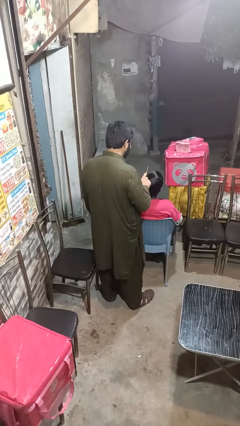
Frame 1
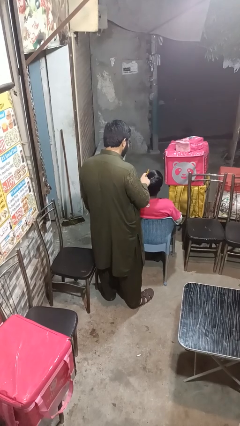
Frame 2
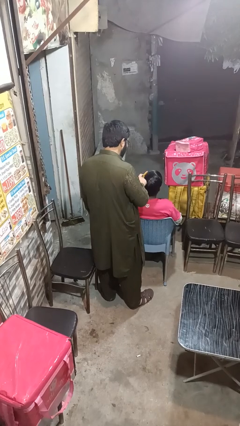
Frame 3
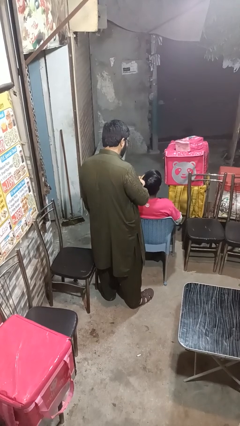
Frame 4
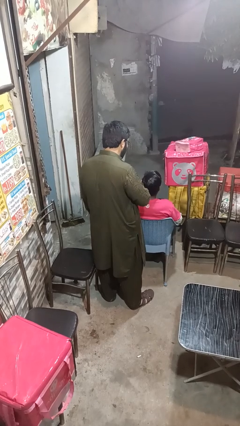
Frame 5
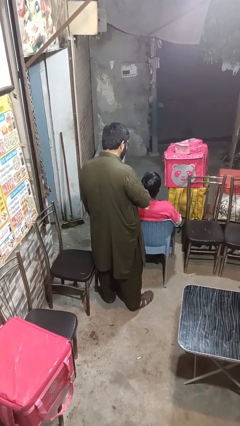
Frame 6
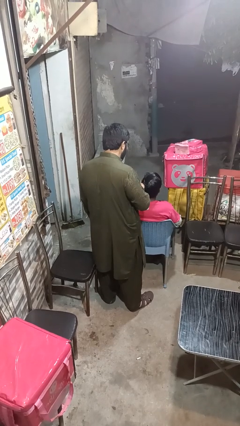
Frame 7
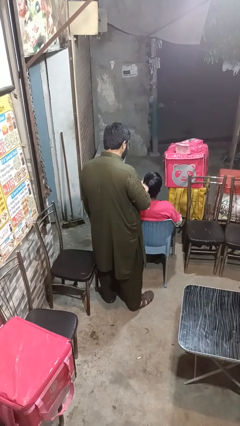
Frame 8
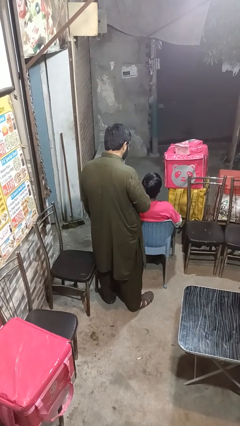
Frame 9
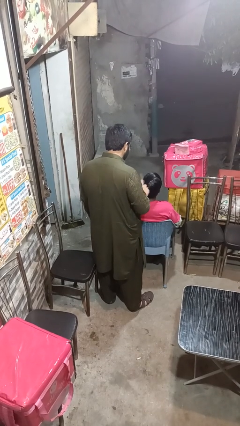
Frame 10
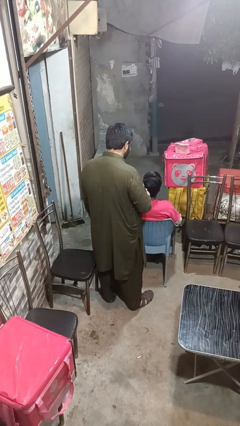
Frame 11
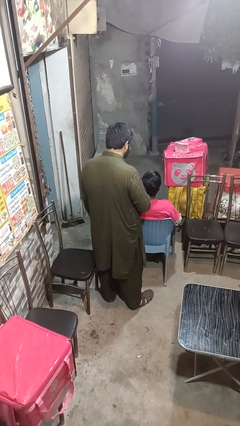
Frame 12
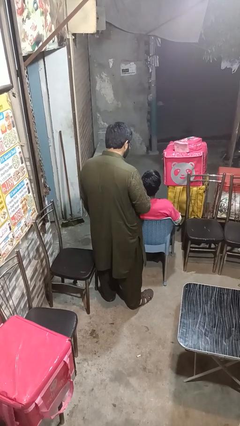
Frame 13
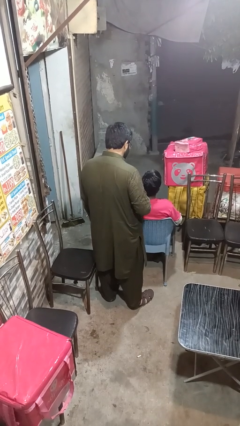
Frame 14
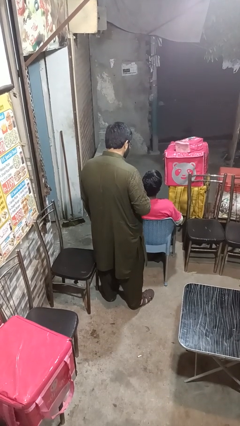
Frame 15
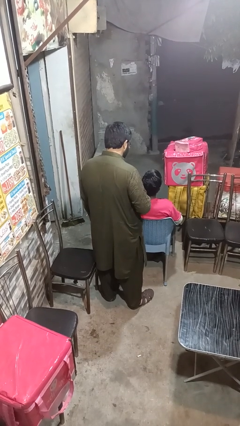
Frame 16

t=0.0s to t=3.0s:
person brushes hair of person

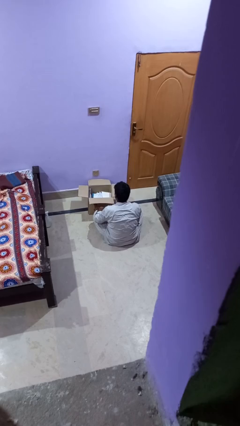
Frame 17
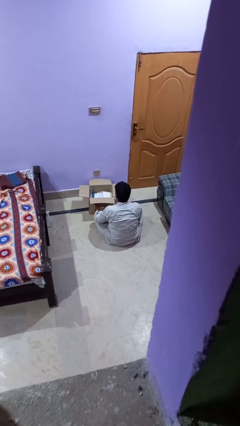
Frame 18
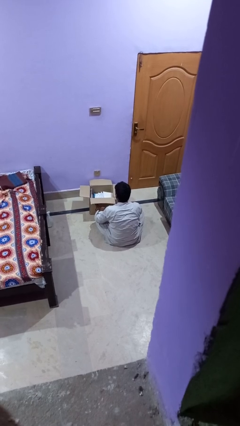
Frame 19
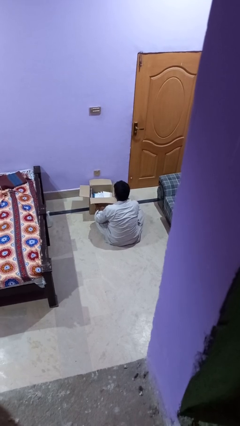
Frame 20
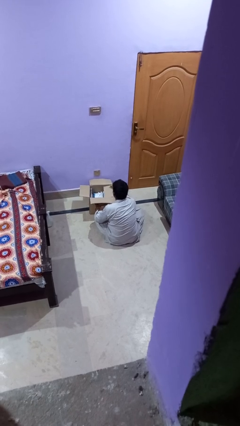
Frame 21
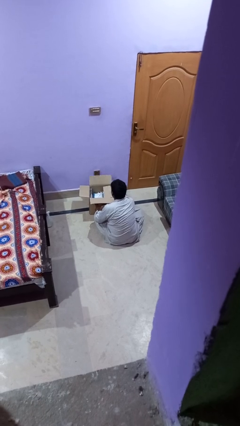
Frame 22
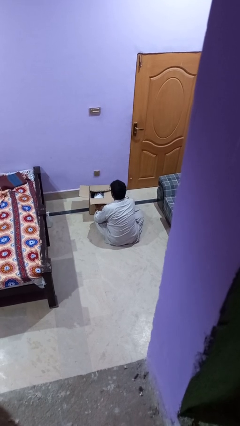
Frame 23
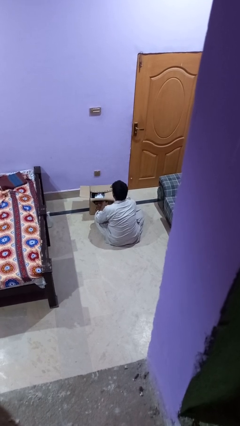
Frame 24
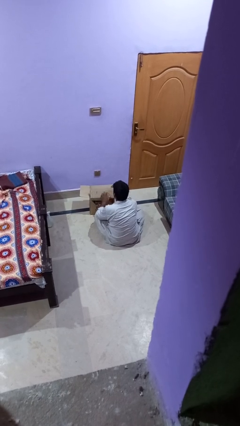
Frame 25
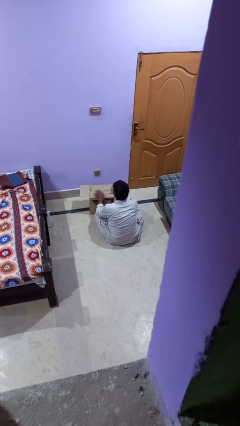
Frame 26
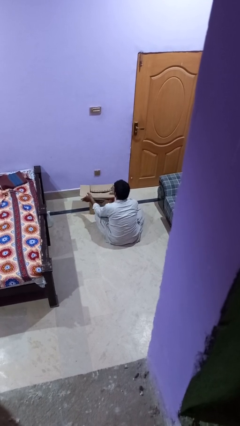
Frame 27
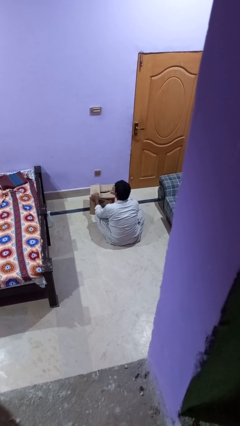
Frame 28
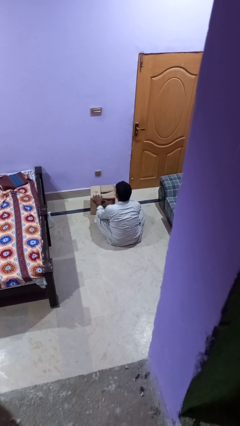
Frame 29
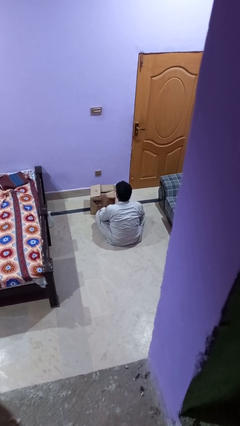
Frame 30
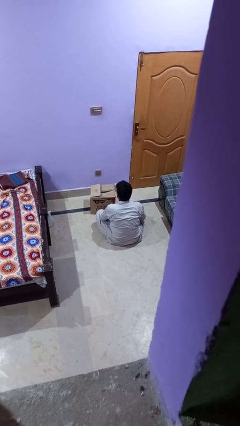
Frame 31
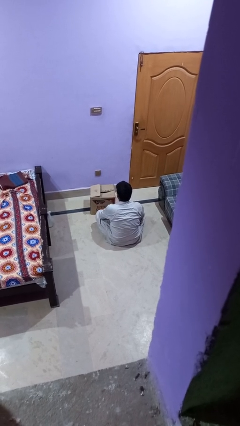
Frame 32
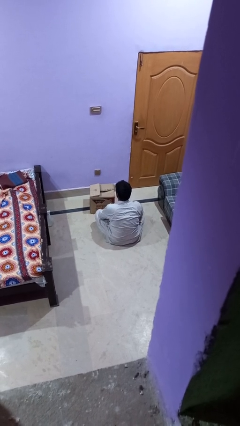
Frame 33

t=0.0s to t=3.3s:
person closes box

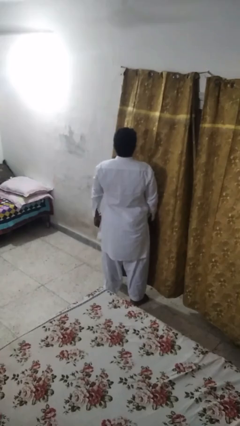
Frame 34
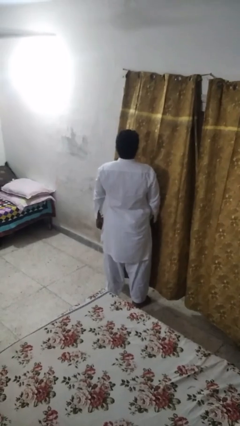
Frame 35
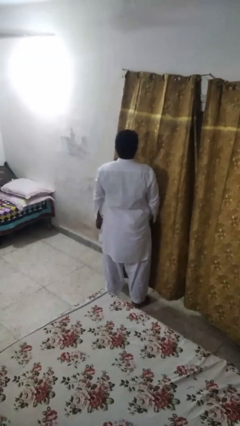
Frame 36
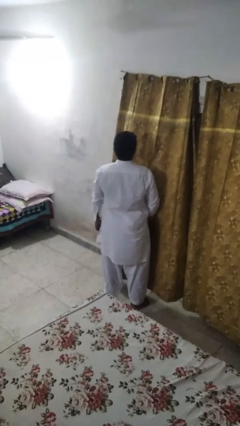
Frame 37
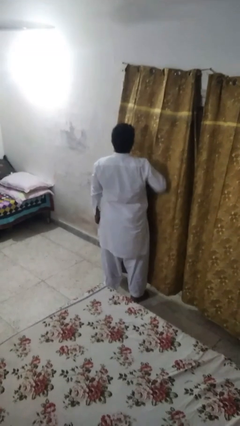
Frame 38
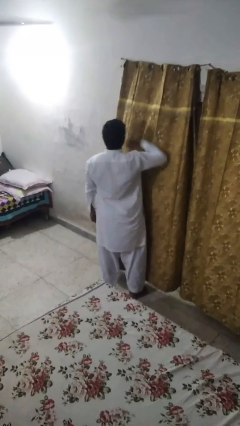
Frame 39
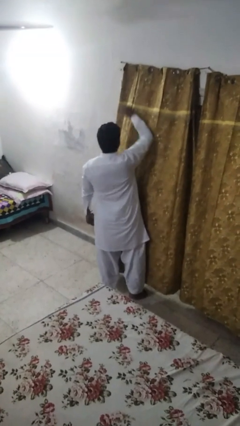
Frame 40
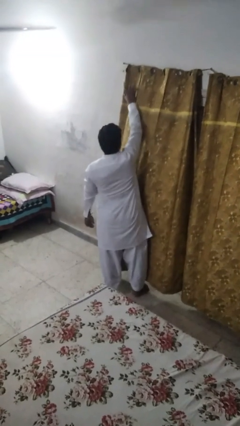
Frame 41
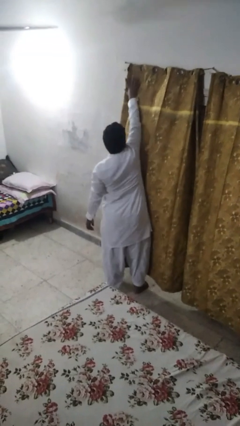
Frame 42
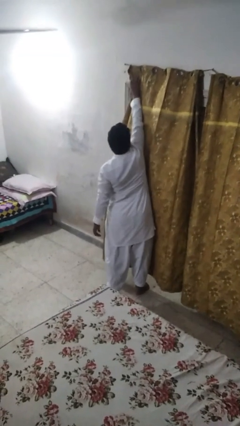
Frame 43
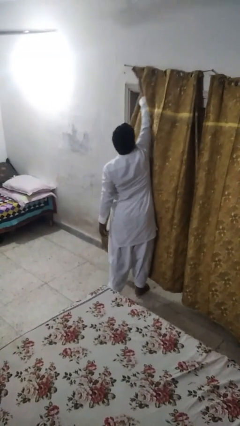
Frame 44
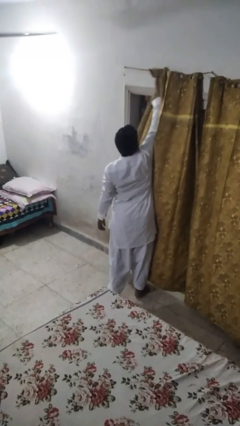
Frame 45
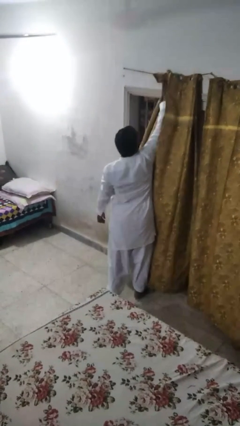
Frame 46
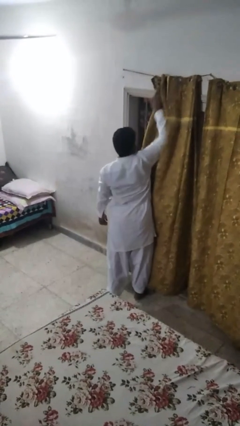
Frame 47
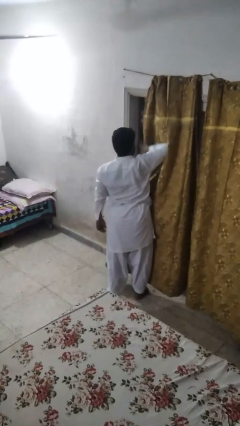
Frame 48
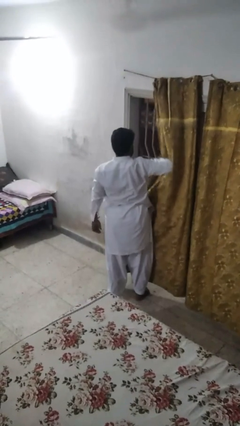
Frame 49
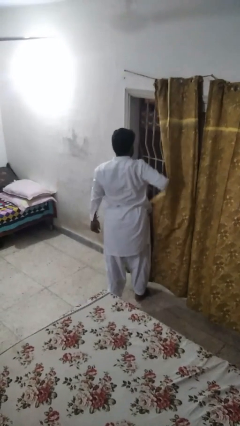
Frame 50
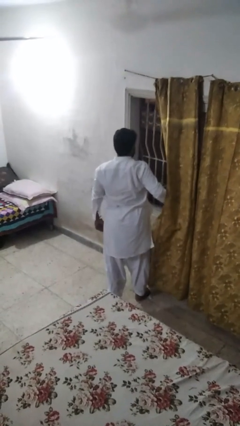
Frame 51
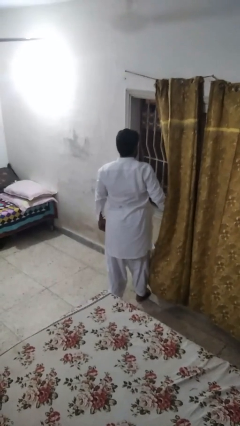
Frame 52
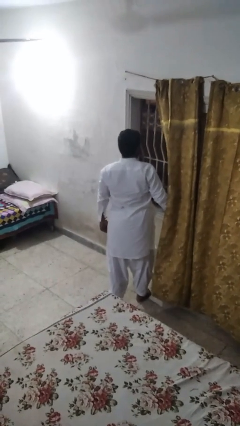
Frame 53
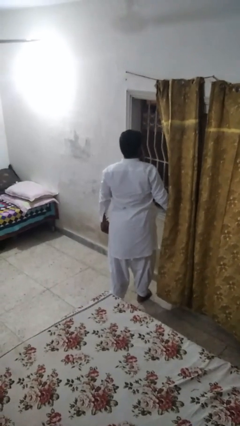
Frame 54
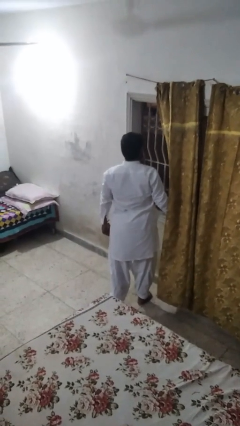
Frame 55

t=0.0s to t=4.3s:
person opens curtains

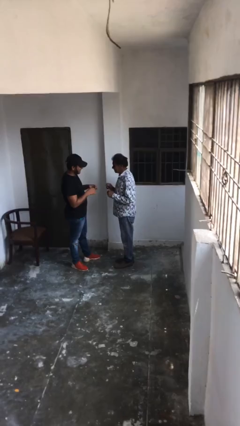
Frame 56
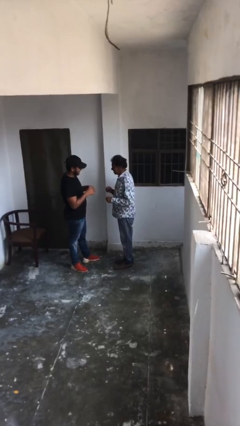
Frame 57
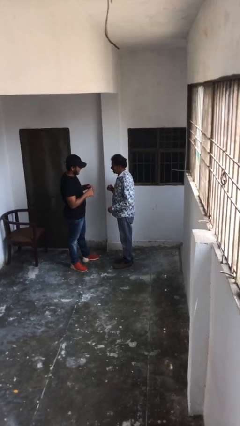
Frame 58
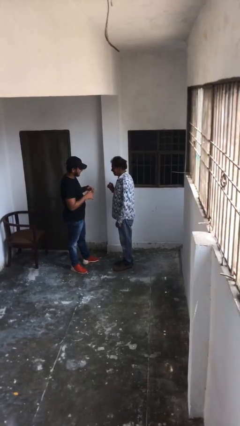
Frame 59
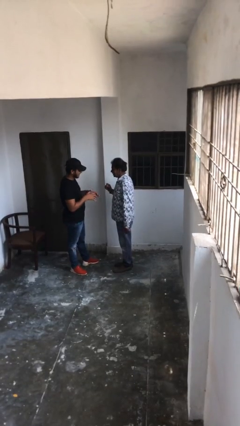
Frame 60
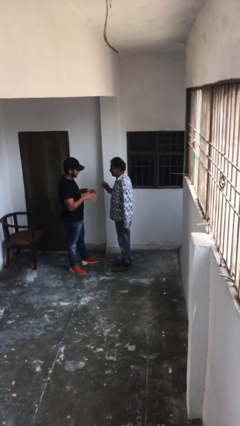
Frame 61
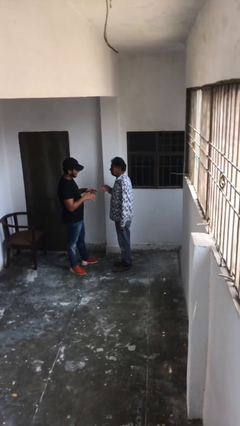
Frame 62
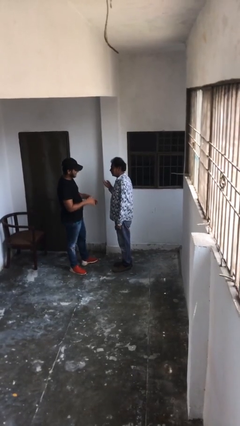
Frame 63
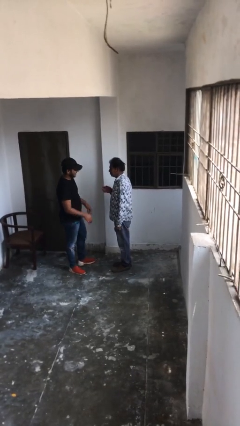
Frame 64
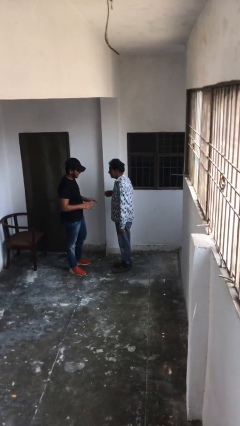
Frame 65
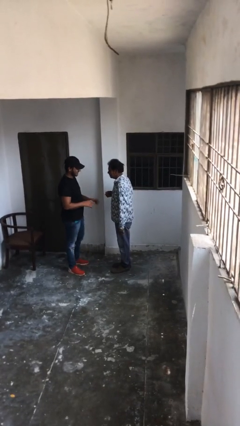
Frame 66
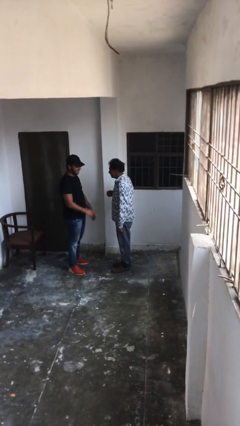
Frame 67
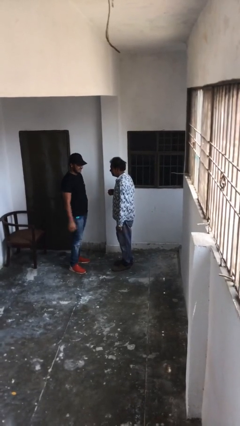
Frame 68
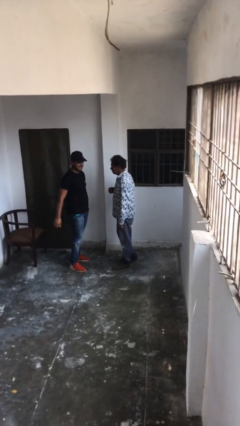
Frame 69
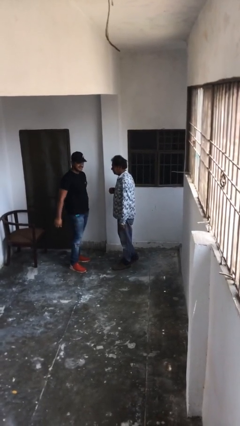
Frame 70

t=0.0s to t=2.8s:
person talks to person

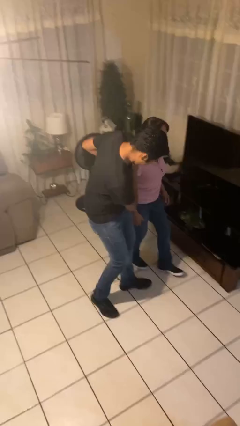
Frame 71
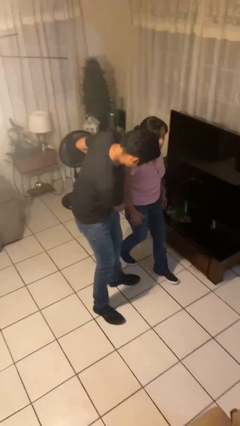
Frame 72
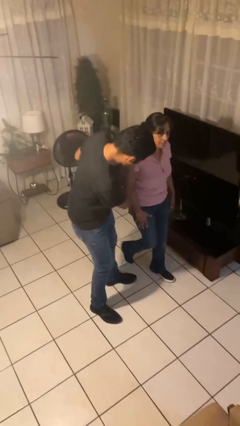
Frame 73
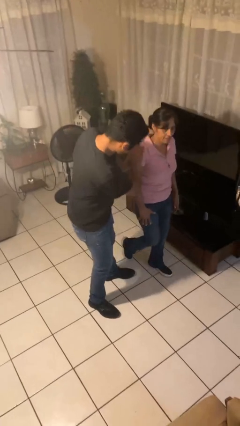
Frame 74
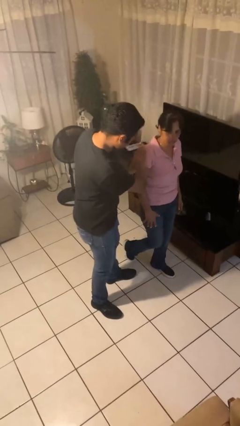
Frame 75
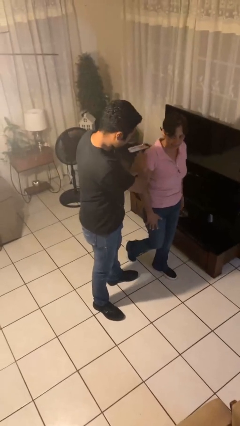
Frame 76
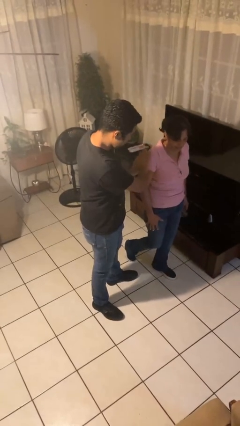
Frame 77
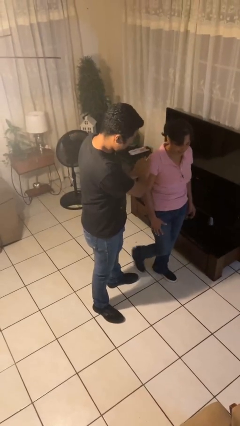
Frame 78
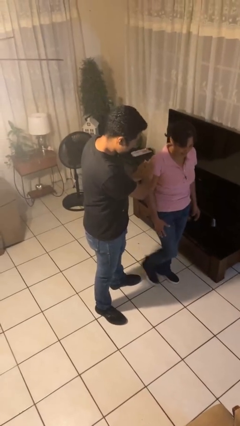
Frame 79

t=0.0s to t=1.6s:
person bumps into person

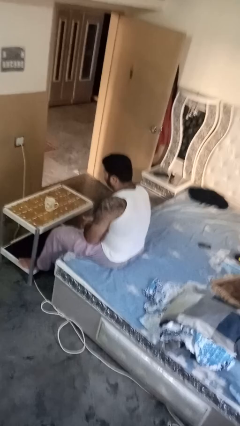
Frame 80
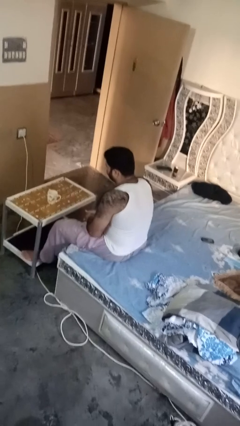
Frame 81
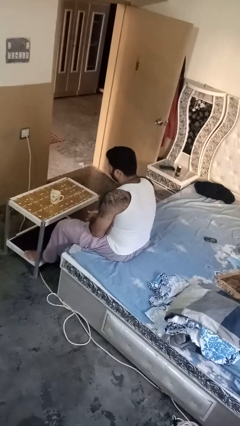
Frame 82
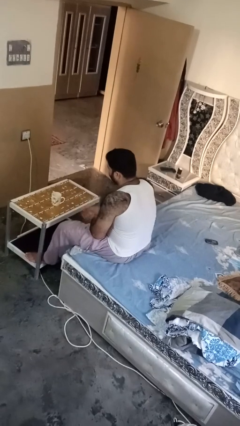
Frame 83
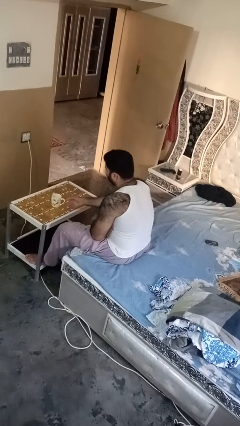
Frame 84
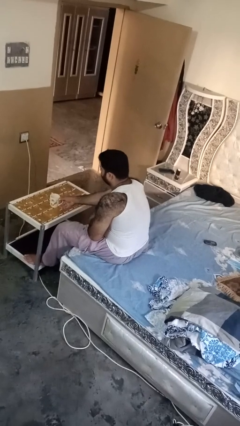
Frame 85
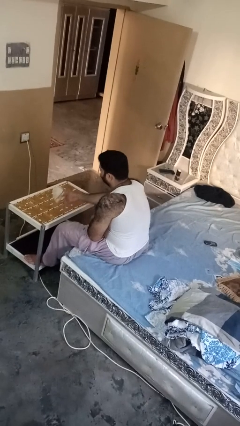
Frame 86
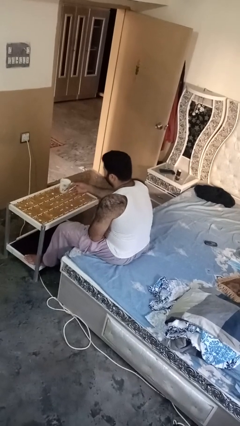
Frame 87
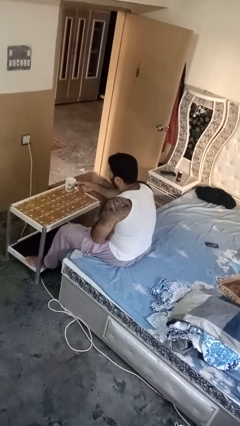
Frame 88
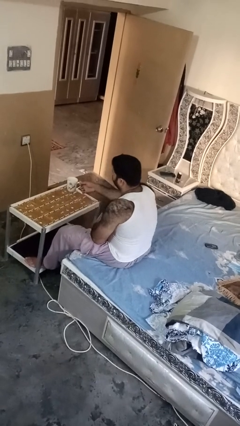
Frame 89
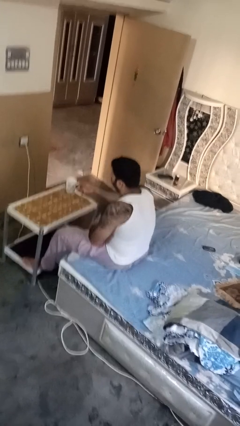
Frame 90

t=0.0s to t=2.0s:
person picks up object from table

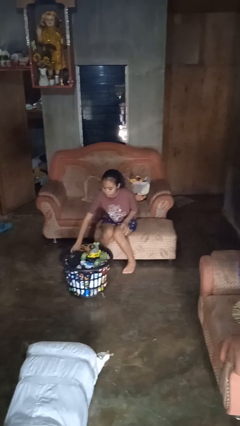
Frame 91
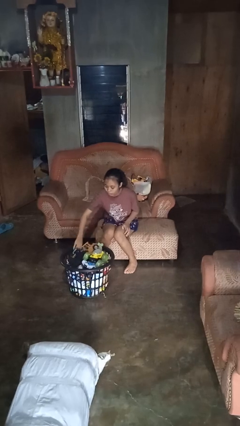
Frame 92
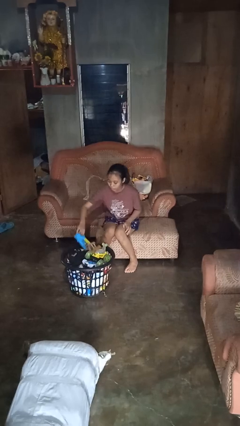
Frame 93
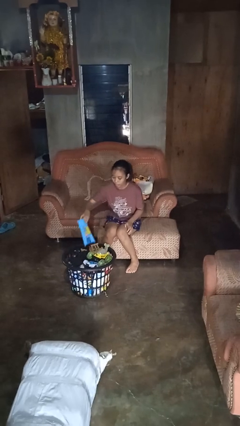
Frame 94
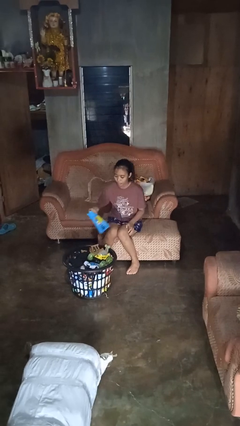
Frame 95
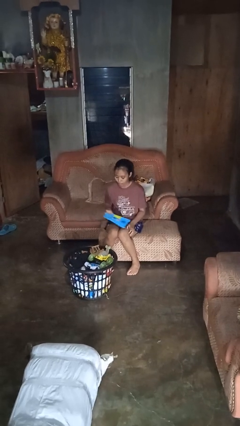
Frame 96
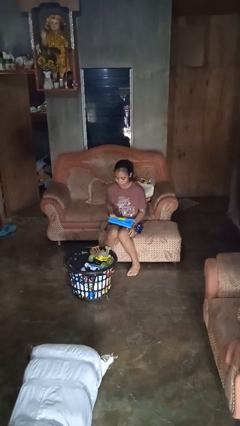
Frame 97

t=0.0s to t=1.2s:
person takes object from basket
